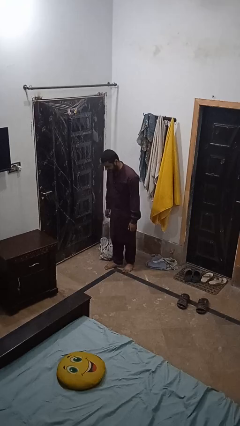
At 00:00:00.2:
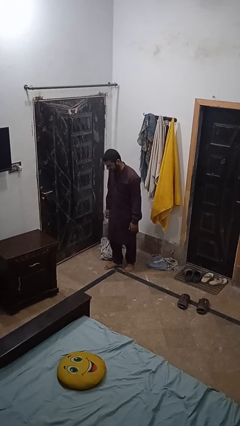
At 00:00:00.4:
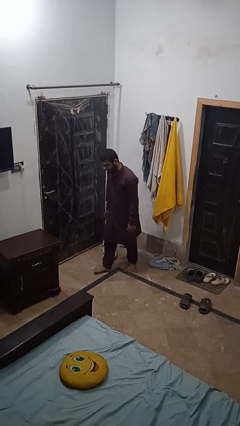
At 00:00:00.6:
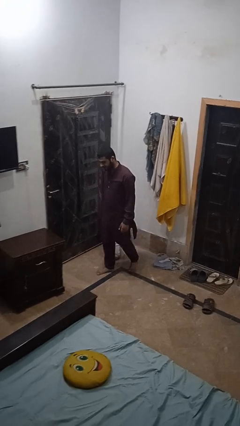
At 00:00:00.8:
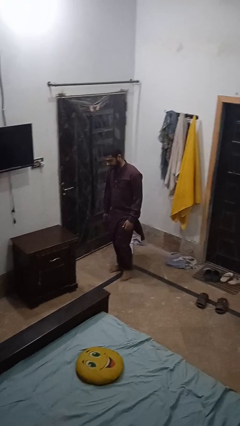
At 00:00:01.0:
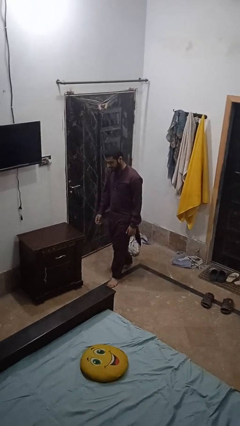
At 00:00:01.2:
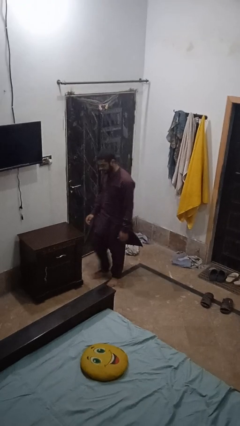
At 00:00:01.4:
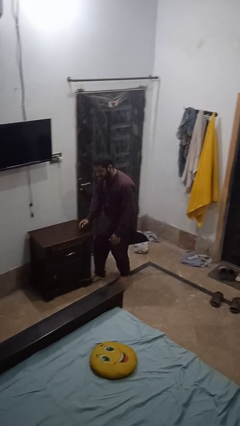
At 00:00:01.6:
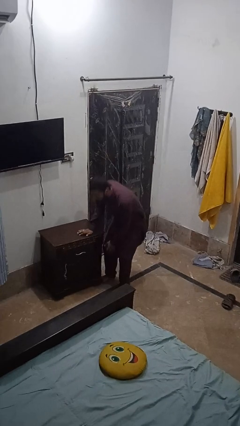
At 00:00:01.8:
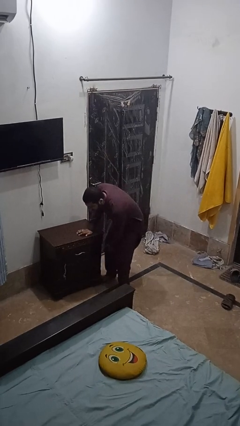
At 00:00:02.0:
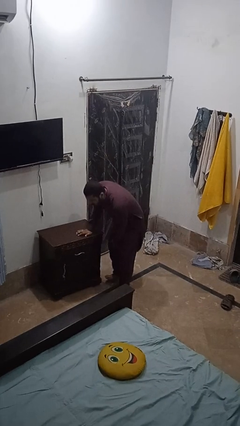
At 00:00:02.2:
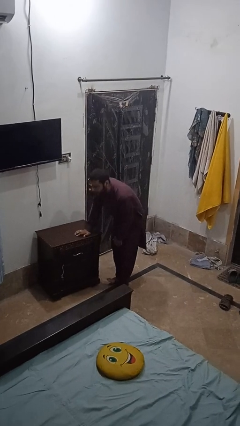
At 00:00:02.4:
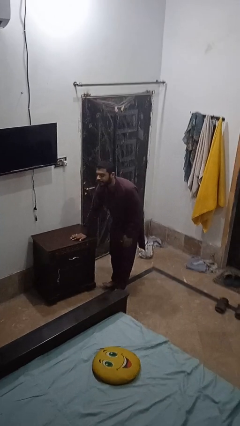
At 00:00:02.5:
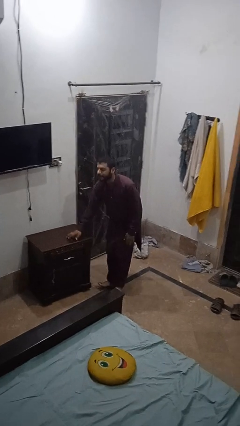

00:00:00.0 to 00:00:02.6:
person stubs toe

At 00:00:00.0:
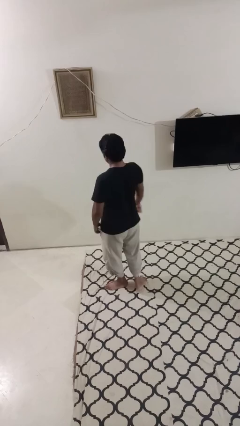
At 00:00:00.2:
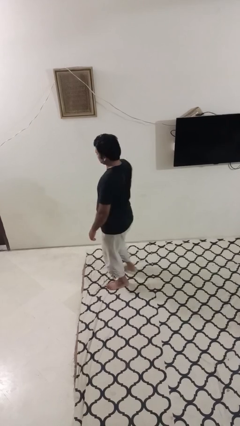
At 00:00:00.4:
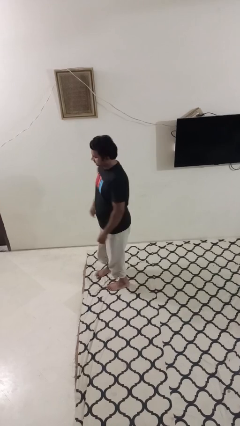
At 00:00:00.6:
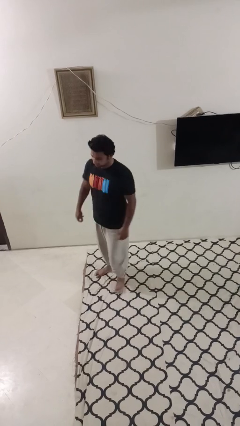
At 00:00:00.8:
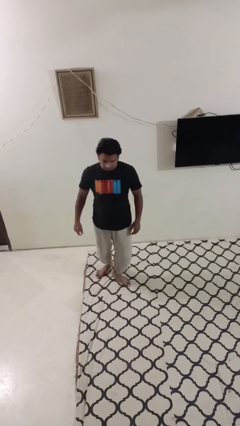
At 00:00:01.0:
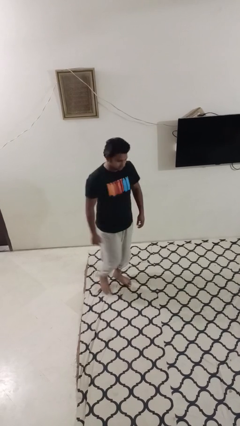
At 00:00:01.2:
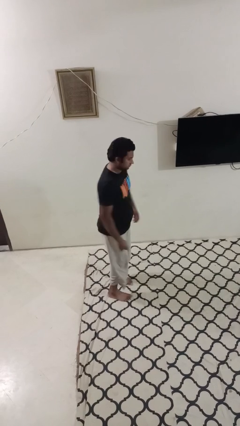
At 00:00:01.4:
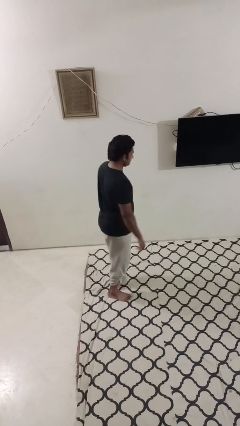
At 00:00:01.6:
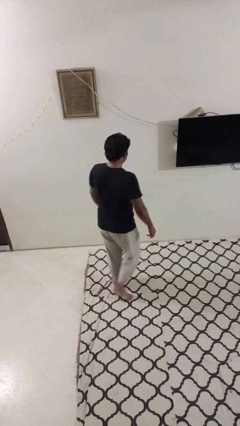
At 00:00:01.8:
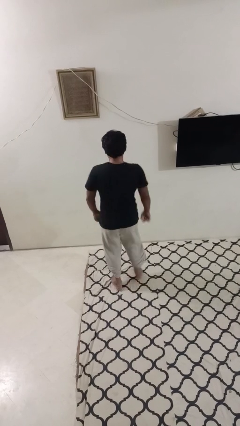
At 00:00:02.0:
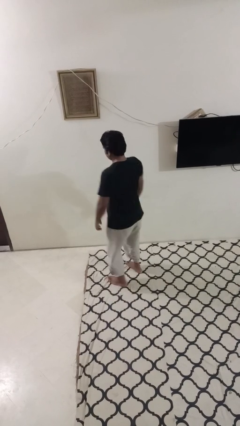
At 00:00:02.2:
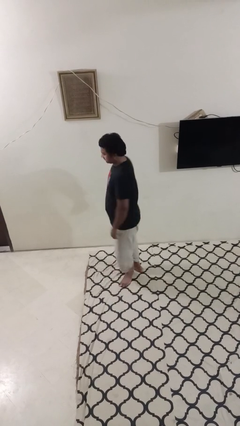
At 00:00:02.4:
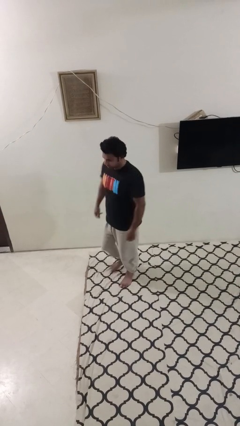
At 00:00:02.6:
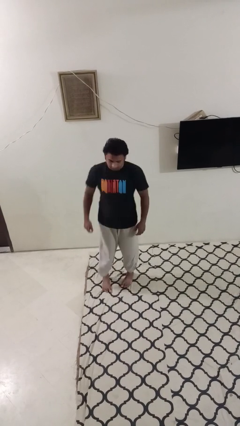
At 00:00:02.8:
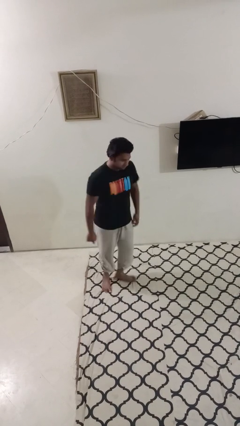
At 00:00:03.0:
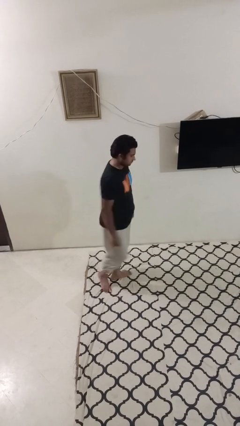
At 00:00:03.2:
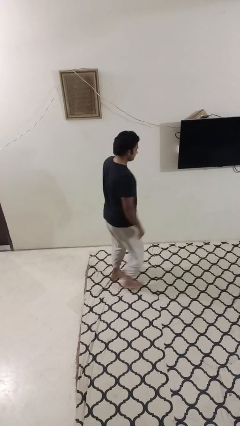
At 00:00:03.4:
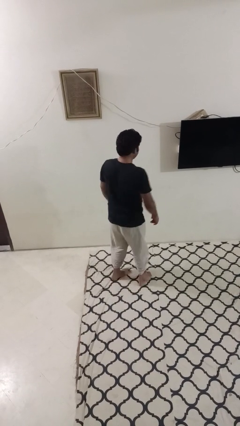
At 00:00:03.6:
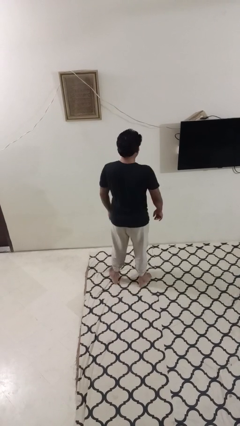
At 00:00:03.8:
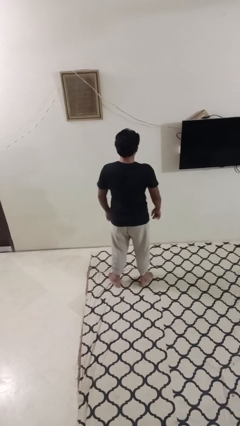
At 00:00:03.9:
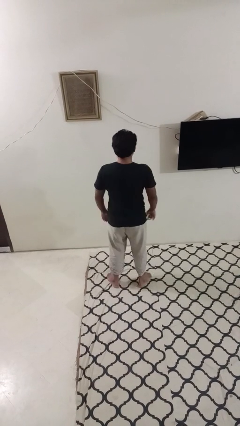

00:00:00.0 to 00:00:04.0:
person twirls

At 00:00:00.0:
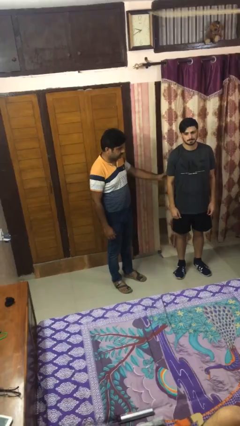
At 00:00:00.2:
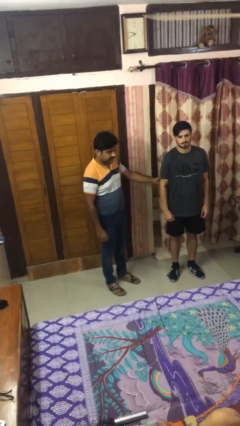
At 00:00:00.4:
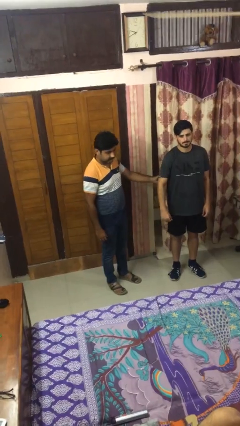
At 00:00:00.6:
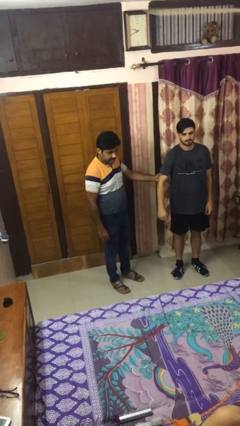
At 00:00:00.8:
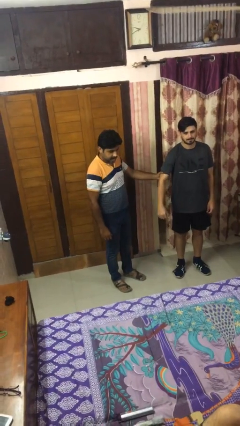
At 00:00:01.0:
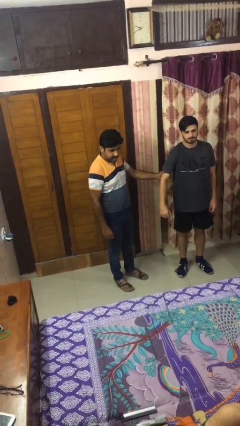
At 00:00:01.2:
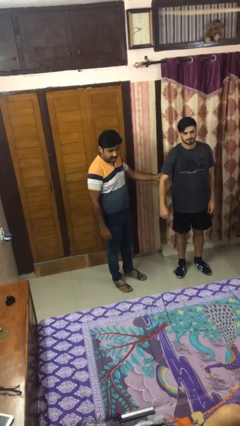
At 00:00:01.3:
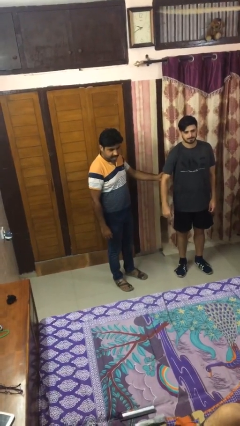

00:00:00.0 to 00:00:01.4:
person grabs person by bicep

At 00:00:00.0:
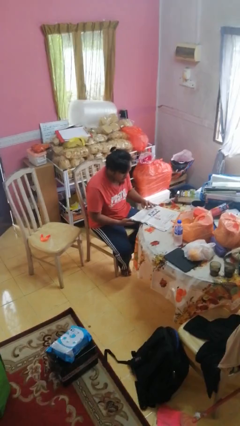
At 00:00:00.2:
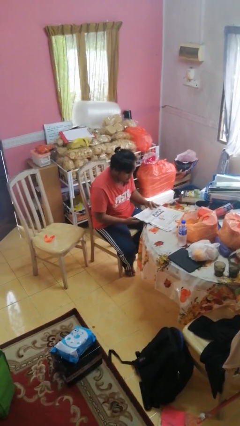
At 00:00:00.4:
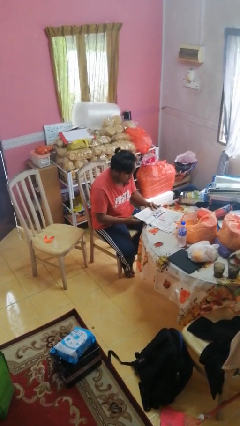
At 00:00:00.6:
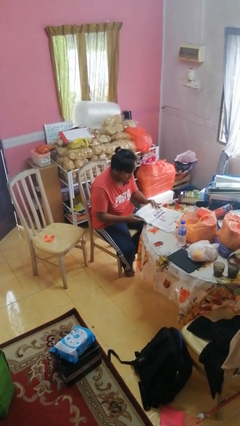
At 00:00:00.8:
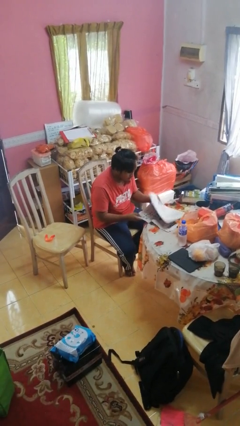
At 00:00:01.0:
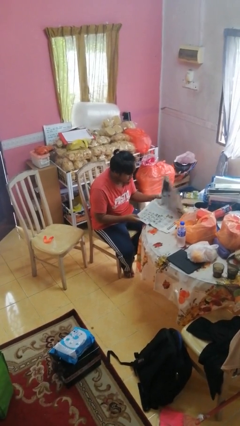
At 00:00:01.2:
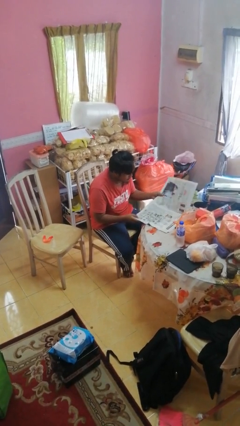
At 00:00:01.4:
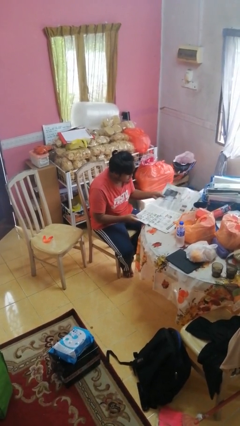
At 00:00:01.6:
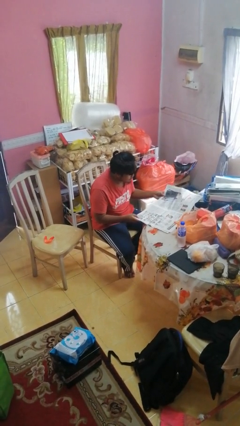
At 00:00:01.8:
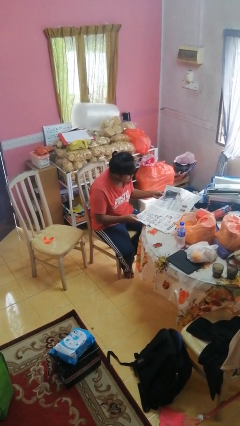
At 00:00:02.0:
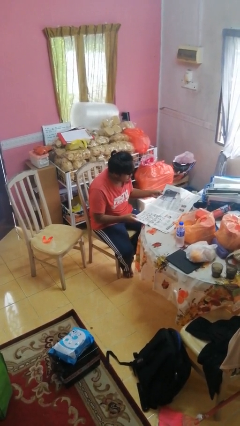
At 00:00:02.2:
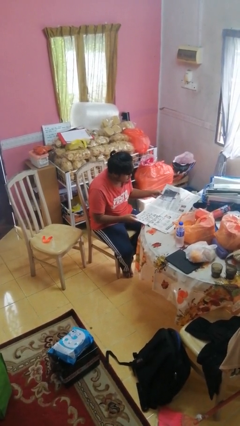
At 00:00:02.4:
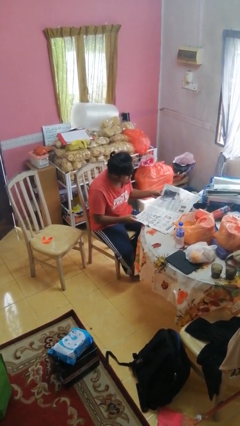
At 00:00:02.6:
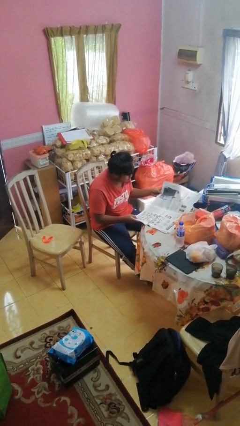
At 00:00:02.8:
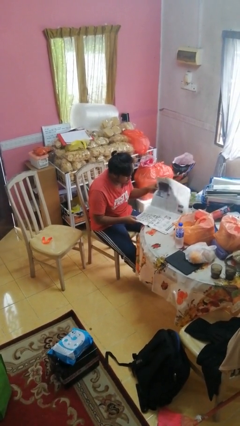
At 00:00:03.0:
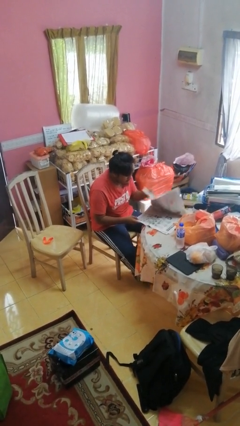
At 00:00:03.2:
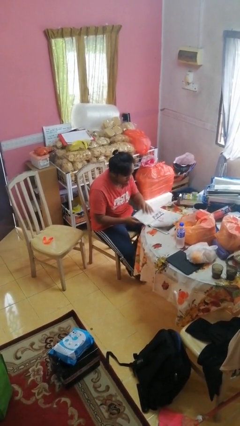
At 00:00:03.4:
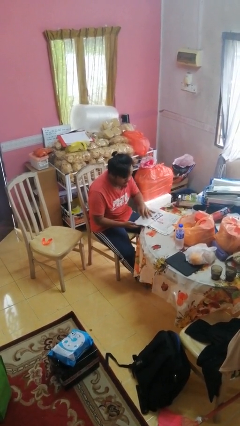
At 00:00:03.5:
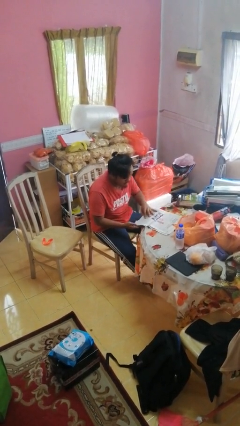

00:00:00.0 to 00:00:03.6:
person reads newspaper

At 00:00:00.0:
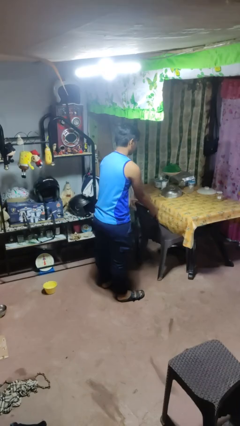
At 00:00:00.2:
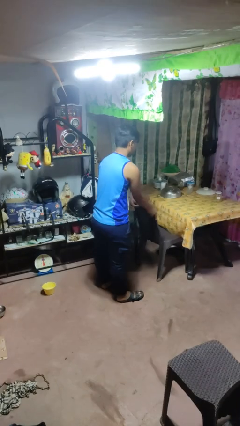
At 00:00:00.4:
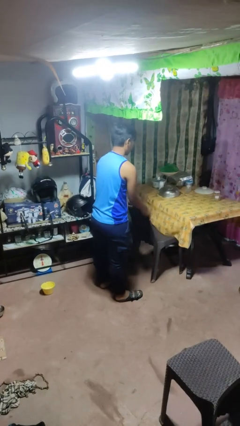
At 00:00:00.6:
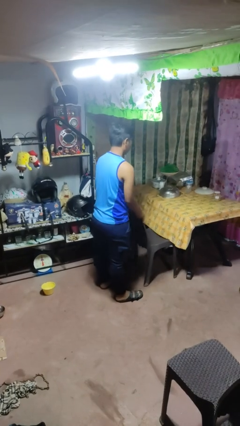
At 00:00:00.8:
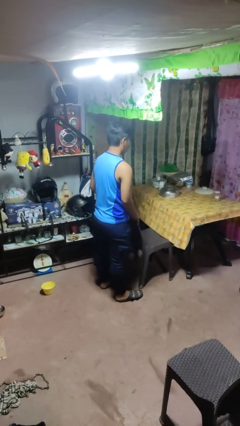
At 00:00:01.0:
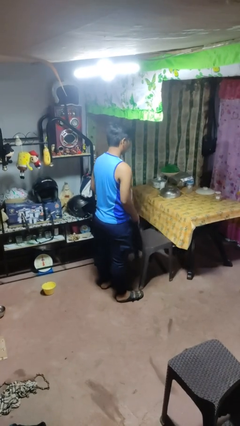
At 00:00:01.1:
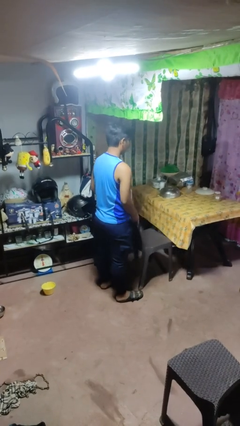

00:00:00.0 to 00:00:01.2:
person pulls out chair

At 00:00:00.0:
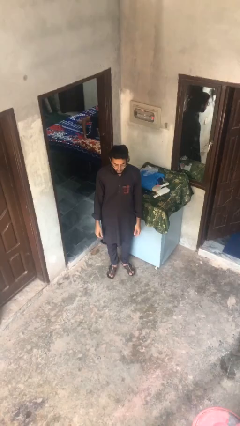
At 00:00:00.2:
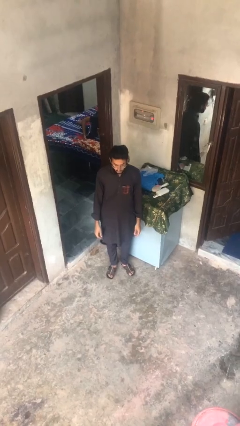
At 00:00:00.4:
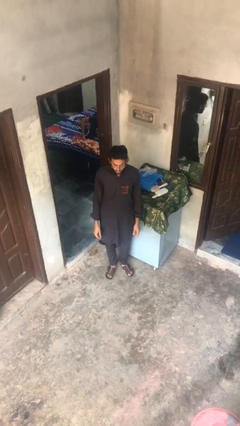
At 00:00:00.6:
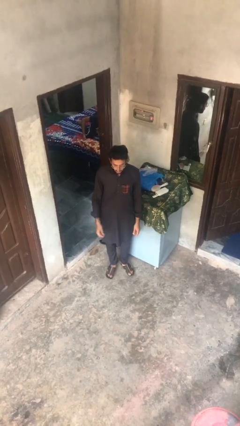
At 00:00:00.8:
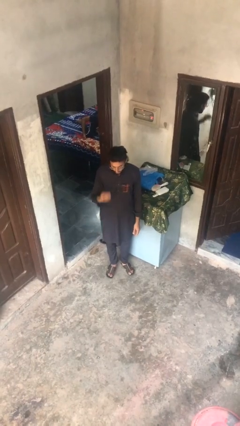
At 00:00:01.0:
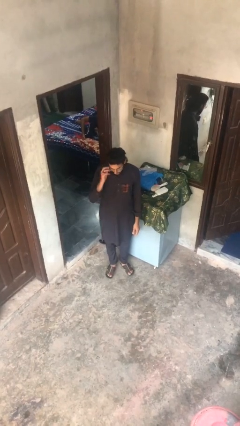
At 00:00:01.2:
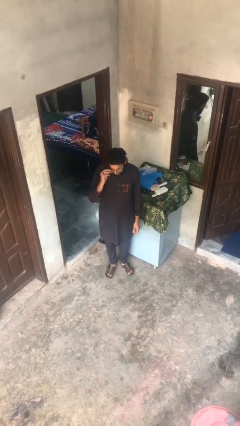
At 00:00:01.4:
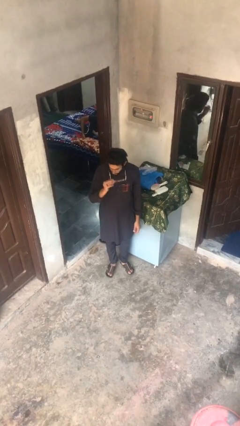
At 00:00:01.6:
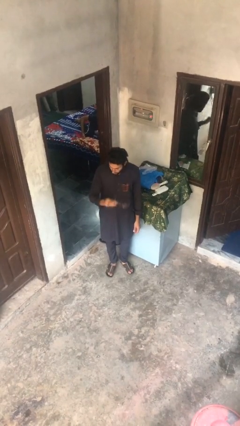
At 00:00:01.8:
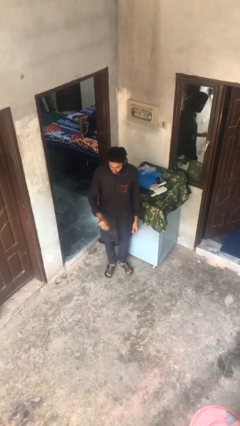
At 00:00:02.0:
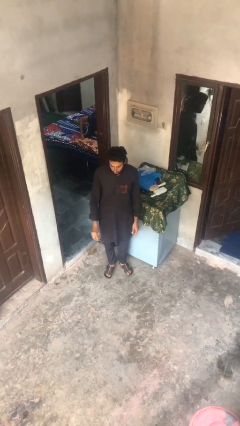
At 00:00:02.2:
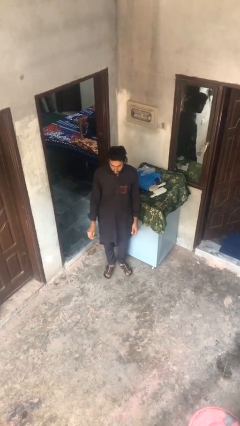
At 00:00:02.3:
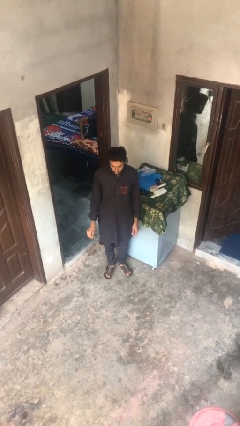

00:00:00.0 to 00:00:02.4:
person takes off glasses

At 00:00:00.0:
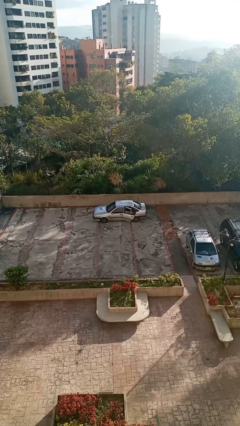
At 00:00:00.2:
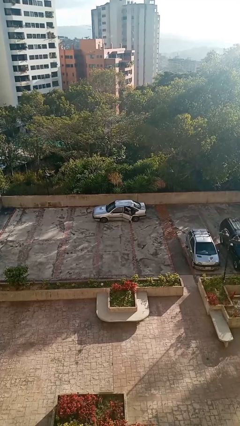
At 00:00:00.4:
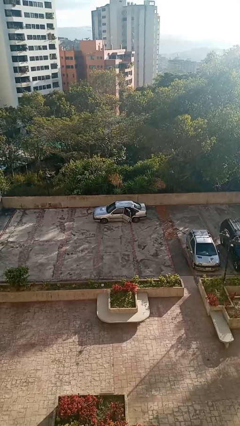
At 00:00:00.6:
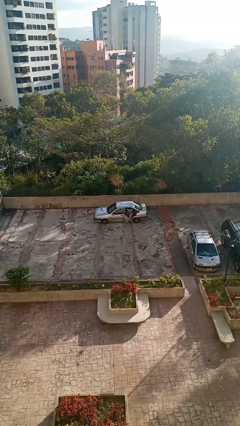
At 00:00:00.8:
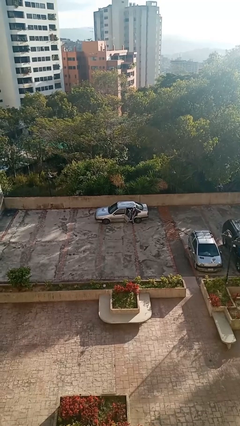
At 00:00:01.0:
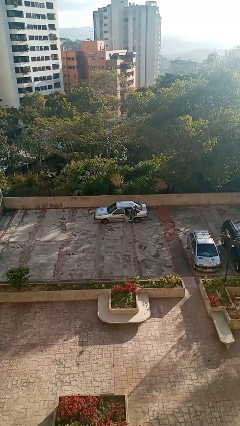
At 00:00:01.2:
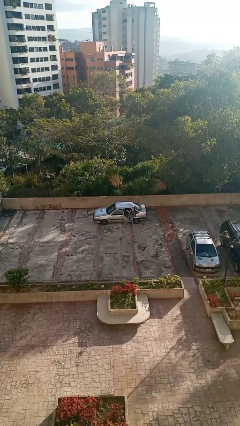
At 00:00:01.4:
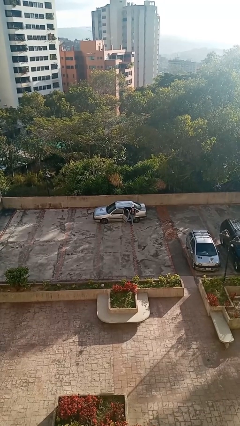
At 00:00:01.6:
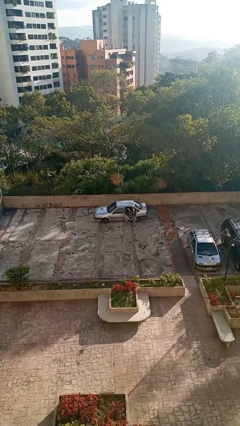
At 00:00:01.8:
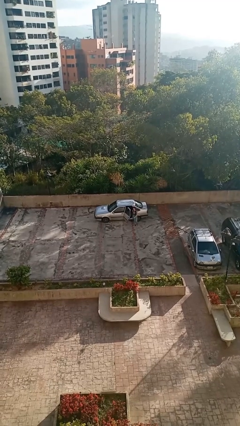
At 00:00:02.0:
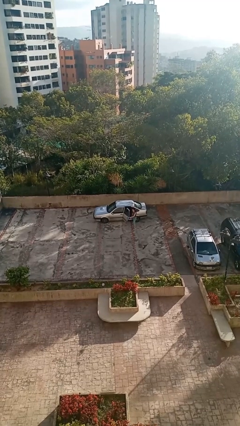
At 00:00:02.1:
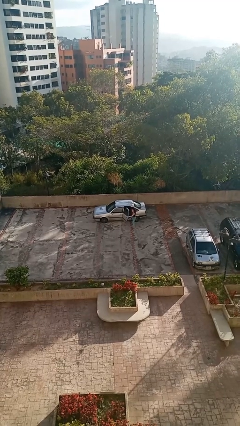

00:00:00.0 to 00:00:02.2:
car drops off person
